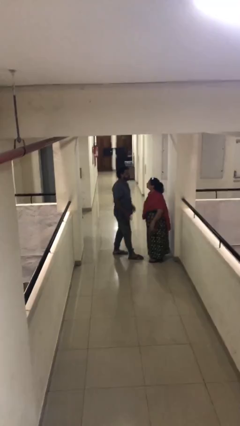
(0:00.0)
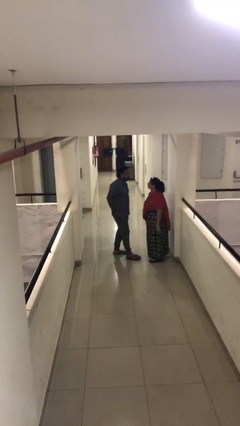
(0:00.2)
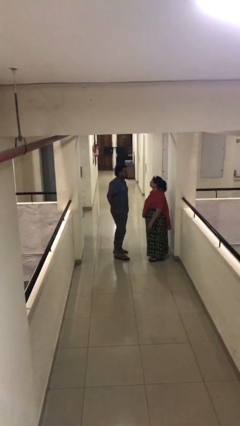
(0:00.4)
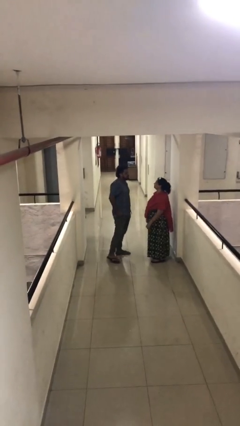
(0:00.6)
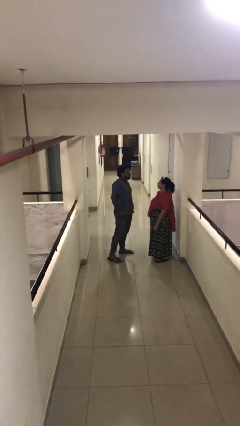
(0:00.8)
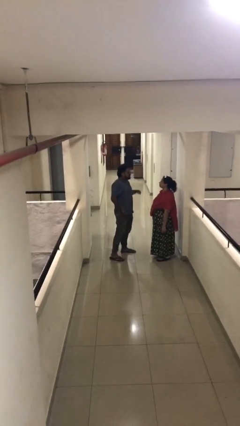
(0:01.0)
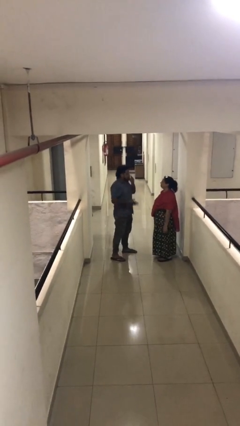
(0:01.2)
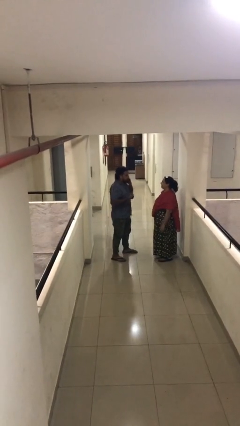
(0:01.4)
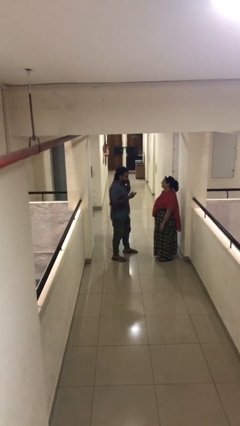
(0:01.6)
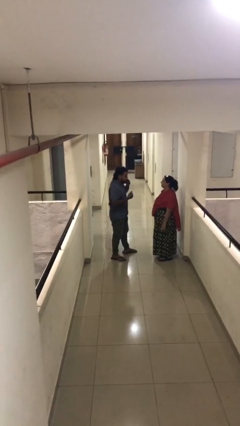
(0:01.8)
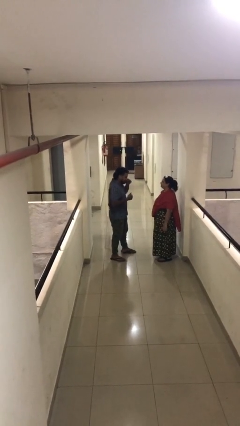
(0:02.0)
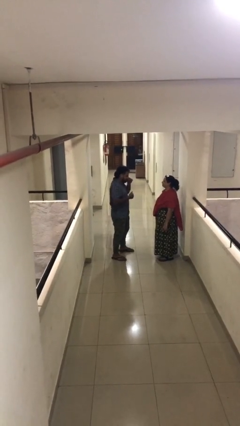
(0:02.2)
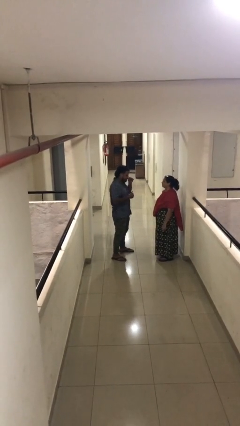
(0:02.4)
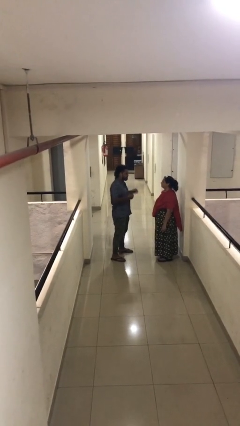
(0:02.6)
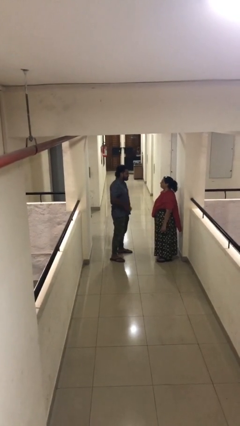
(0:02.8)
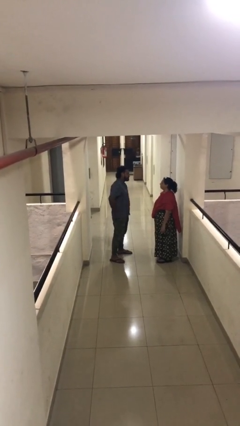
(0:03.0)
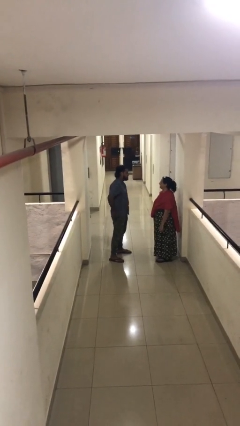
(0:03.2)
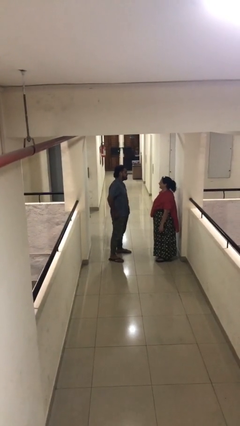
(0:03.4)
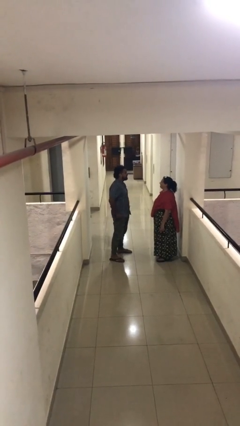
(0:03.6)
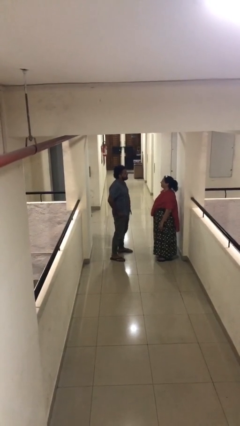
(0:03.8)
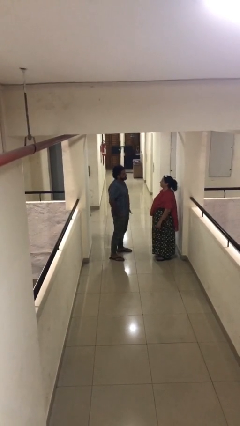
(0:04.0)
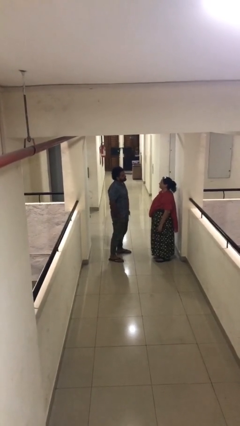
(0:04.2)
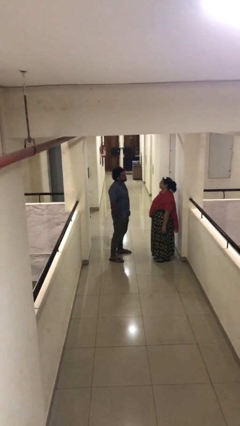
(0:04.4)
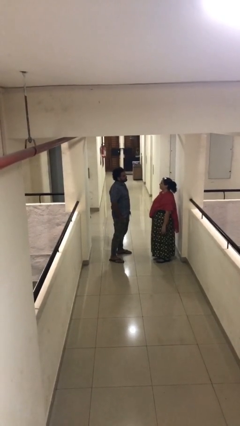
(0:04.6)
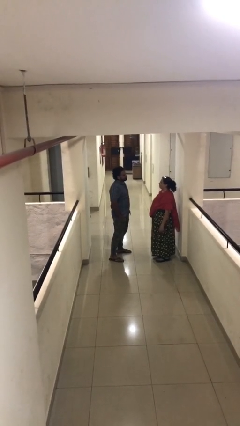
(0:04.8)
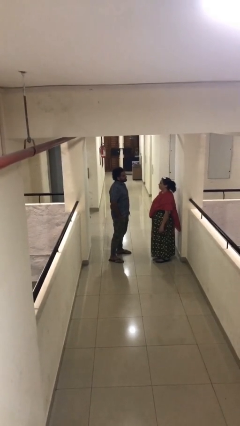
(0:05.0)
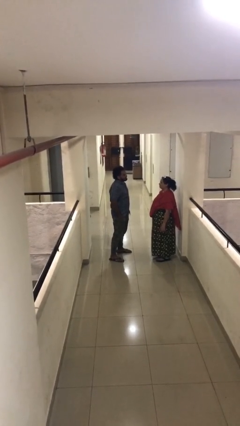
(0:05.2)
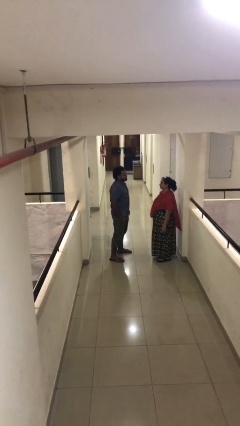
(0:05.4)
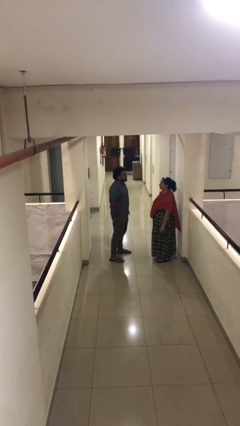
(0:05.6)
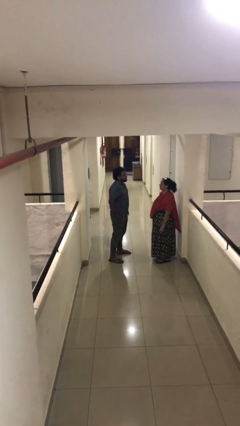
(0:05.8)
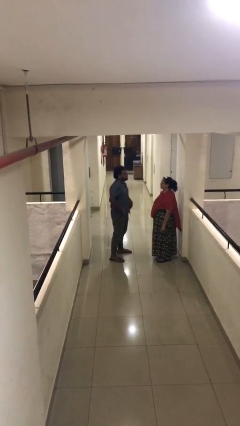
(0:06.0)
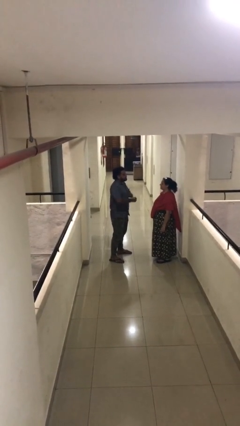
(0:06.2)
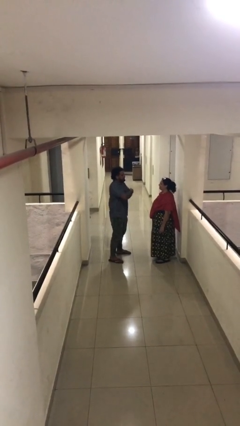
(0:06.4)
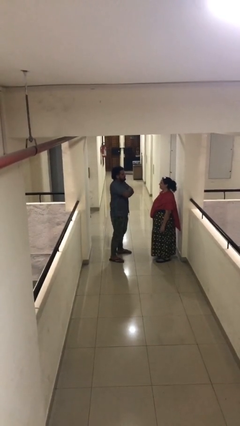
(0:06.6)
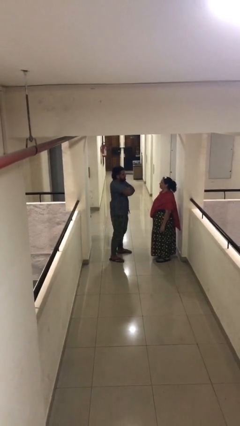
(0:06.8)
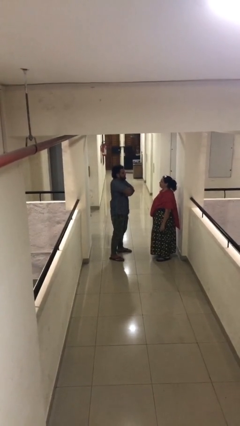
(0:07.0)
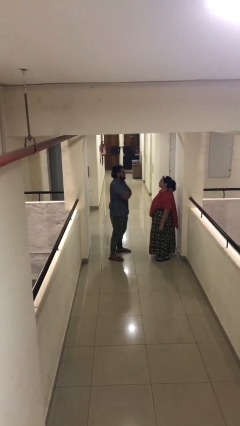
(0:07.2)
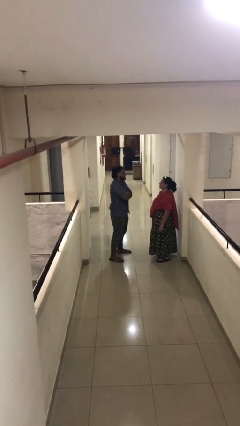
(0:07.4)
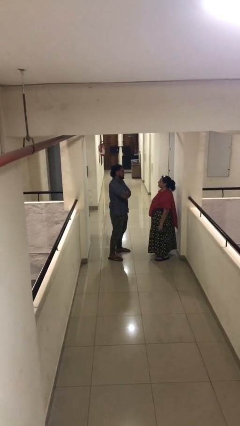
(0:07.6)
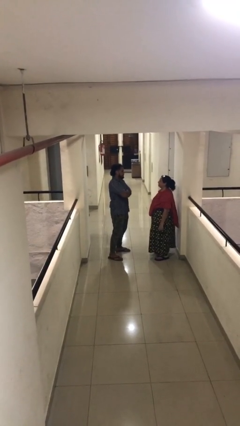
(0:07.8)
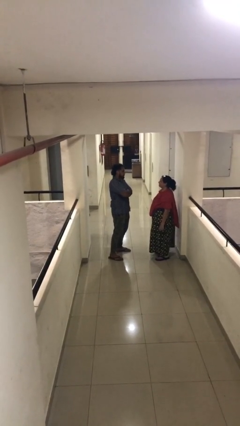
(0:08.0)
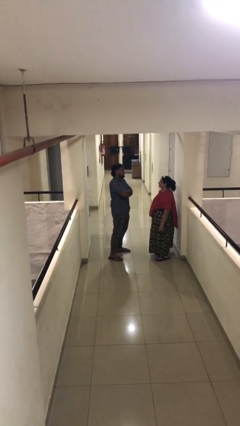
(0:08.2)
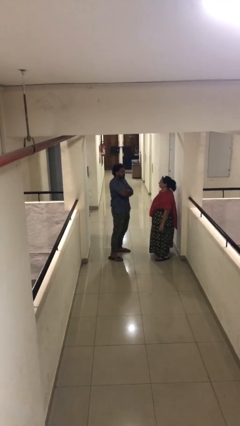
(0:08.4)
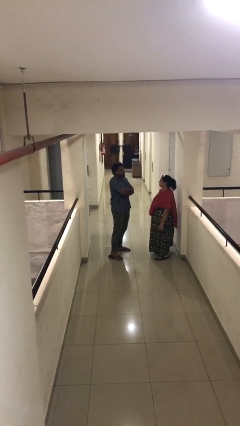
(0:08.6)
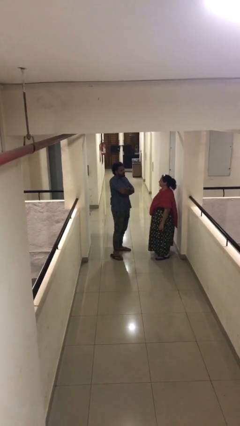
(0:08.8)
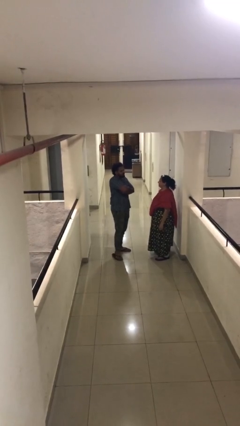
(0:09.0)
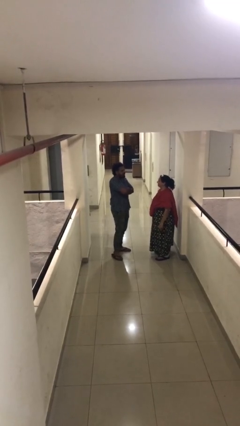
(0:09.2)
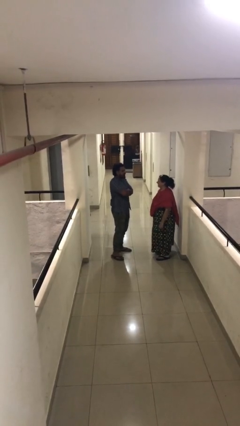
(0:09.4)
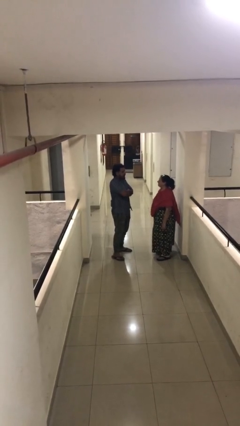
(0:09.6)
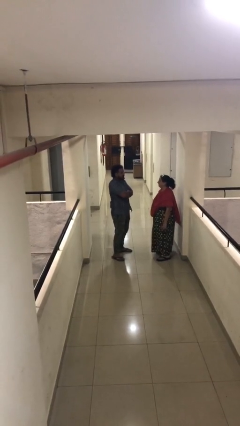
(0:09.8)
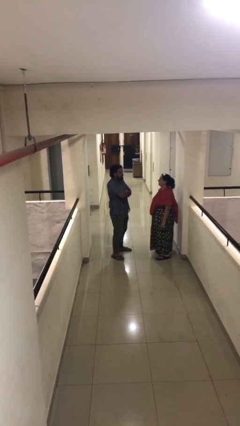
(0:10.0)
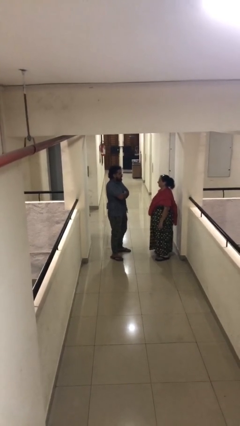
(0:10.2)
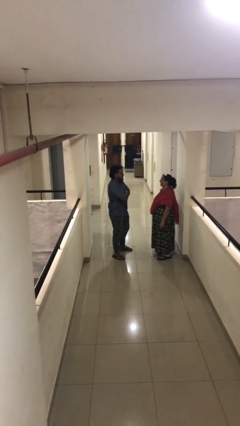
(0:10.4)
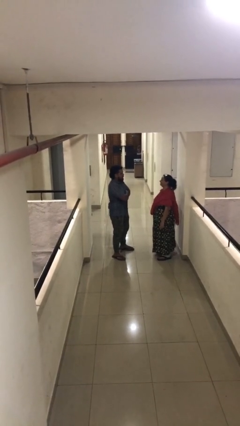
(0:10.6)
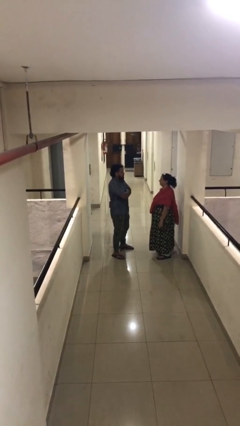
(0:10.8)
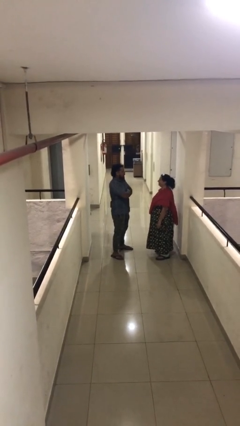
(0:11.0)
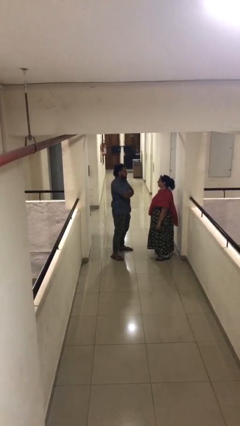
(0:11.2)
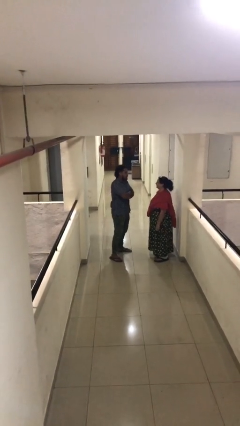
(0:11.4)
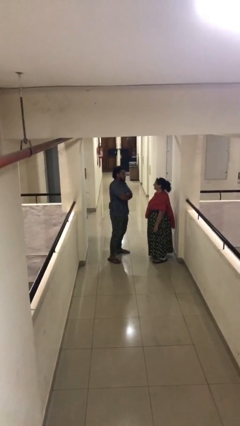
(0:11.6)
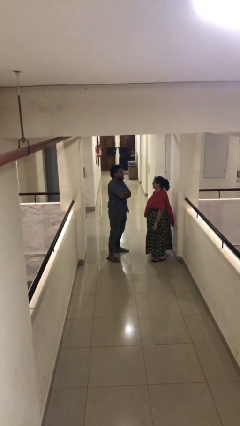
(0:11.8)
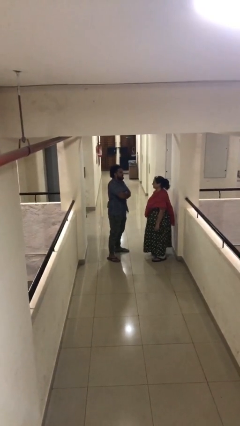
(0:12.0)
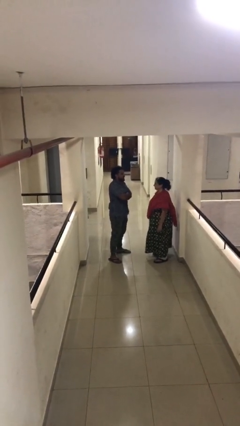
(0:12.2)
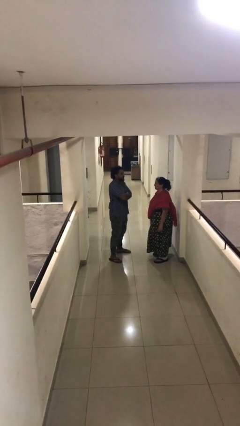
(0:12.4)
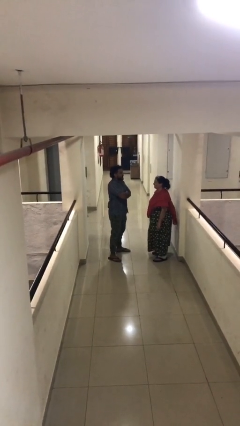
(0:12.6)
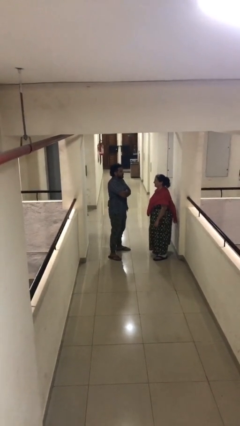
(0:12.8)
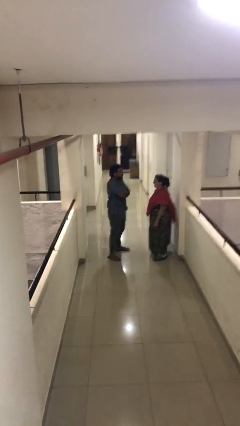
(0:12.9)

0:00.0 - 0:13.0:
person talks to person

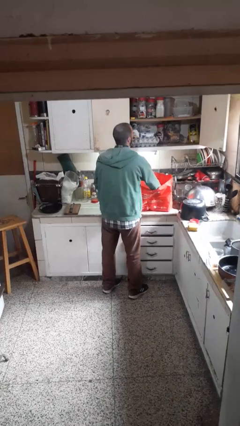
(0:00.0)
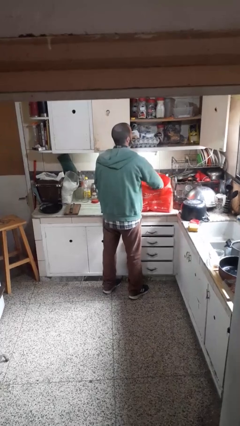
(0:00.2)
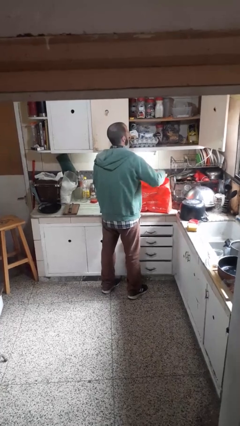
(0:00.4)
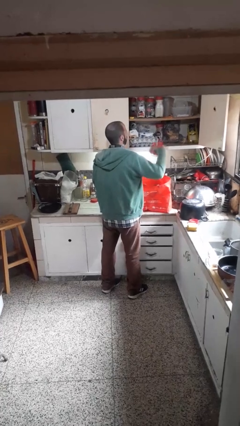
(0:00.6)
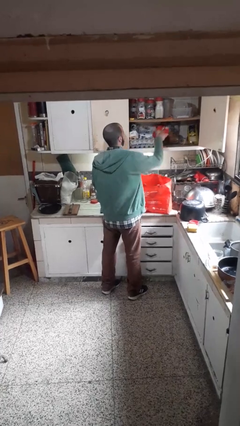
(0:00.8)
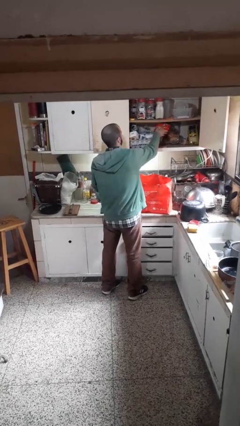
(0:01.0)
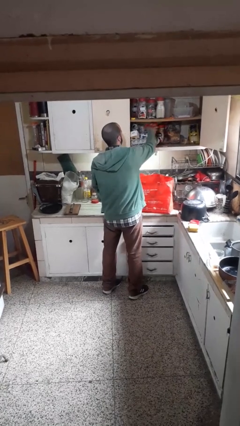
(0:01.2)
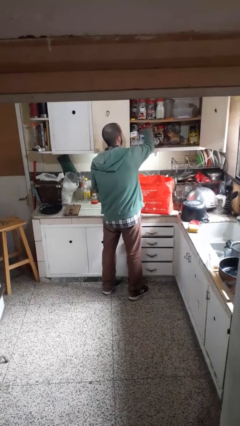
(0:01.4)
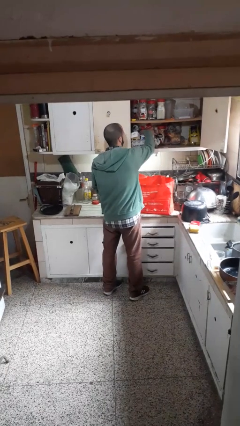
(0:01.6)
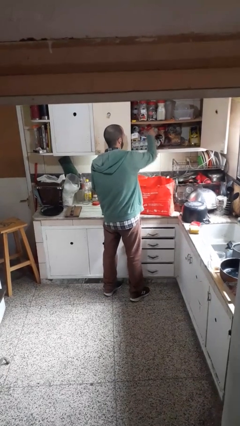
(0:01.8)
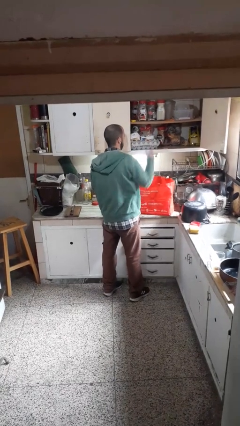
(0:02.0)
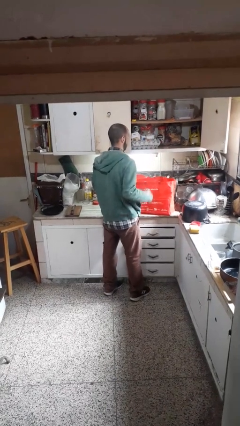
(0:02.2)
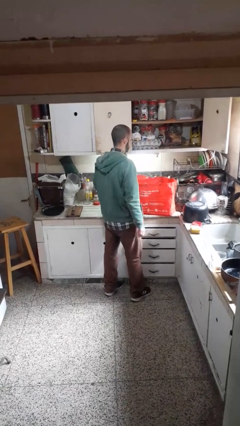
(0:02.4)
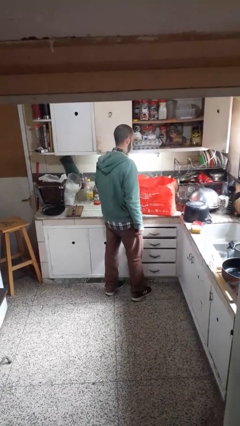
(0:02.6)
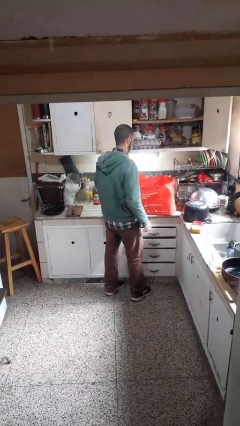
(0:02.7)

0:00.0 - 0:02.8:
person loads groceries into cabinet

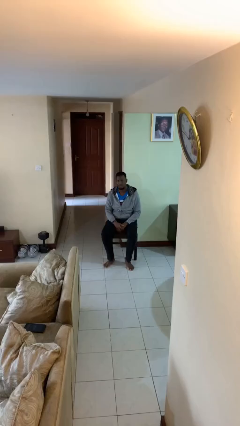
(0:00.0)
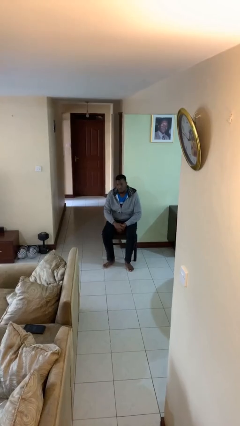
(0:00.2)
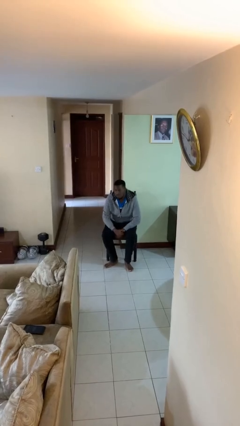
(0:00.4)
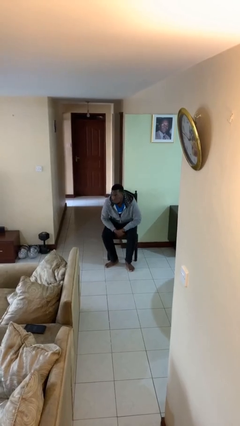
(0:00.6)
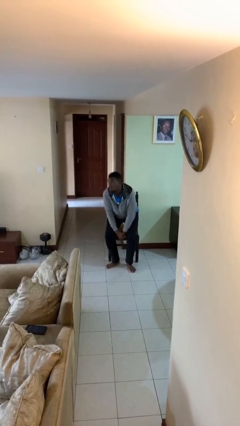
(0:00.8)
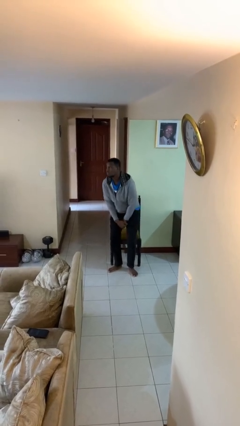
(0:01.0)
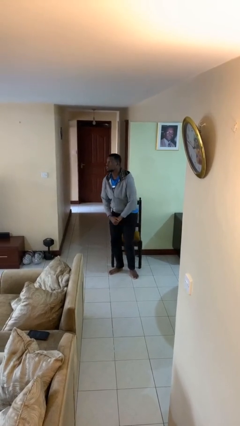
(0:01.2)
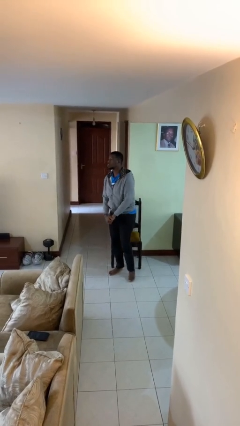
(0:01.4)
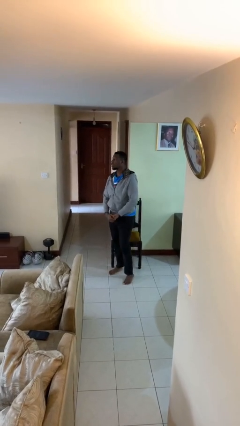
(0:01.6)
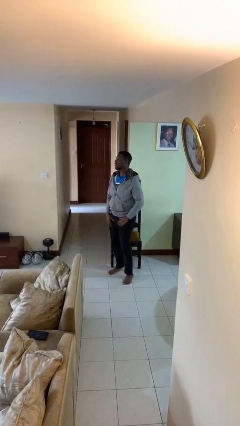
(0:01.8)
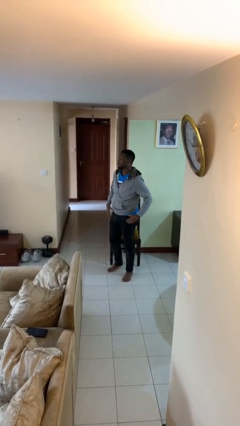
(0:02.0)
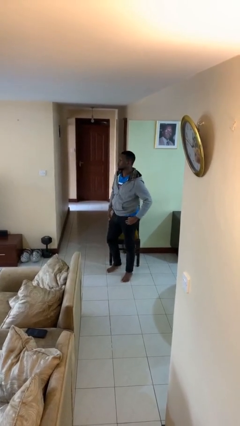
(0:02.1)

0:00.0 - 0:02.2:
person stands up
